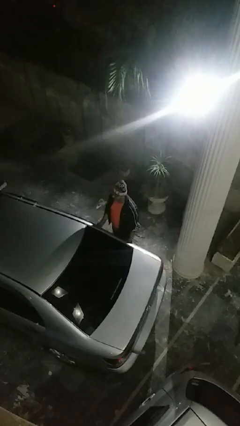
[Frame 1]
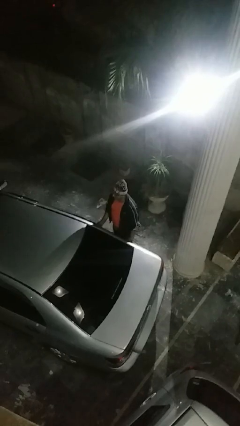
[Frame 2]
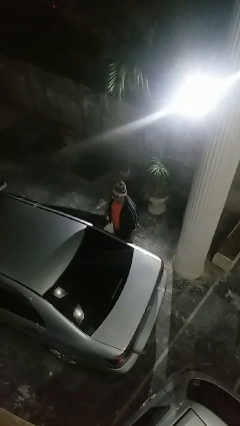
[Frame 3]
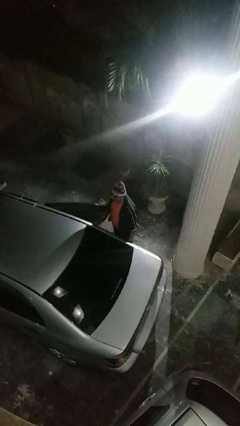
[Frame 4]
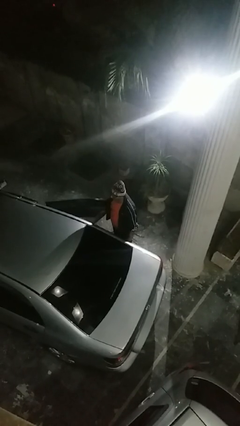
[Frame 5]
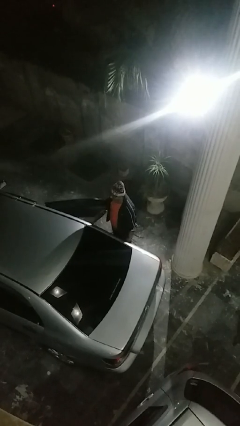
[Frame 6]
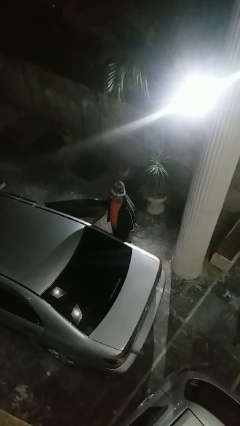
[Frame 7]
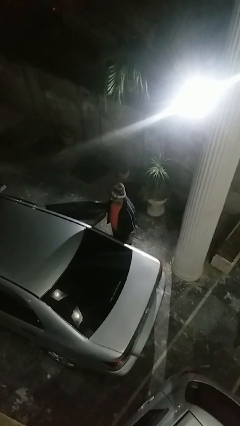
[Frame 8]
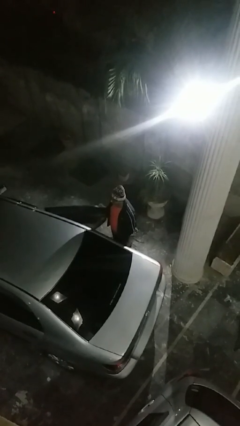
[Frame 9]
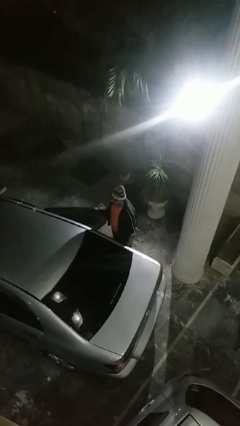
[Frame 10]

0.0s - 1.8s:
person opens car door

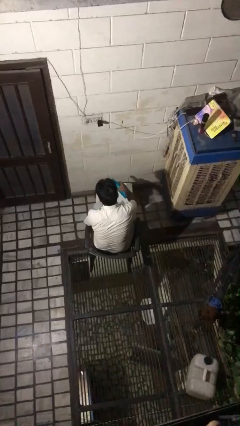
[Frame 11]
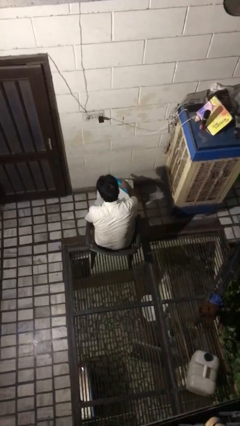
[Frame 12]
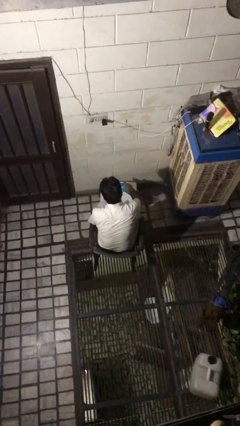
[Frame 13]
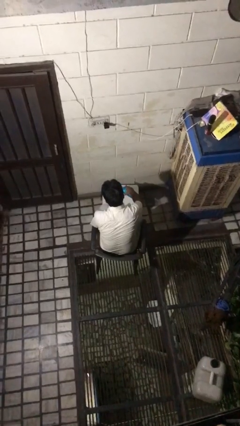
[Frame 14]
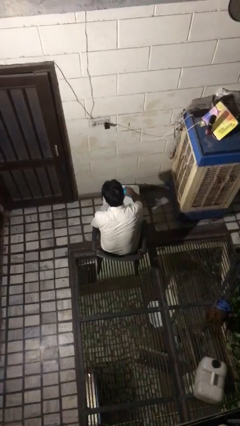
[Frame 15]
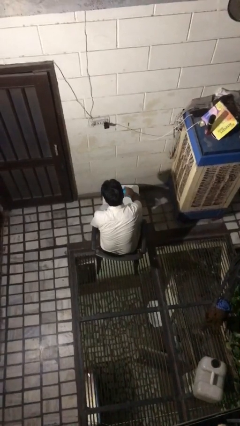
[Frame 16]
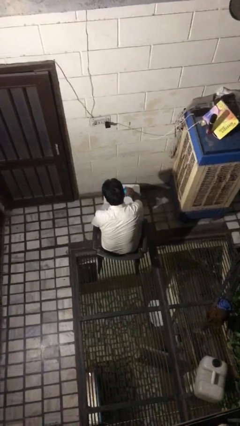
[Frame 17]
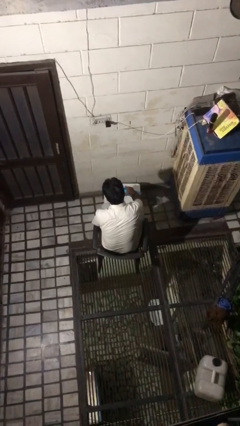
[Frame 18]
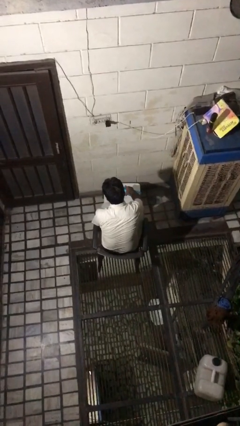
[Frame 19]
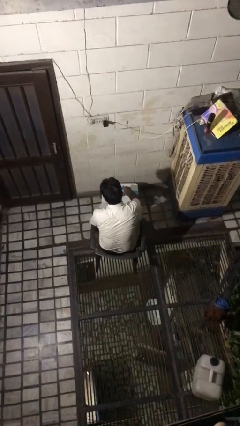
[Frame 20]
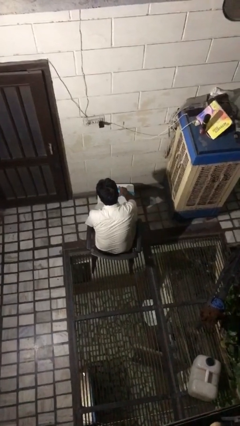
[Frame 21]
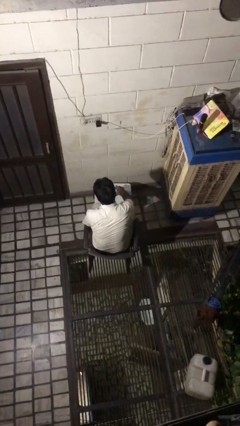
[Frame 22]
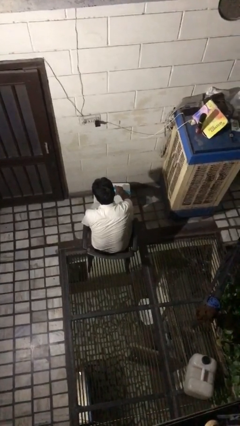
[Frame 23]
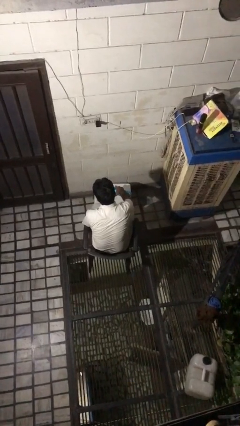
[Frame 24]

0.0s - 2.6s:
person pours liquid into cup

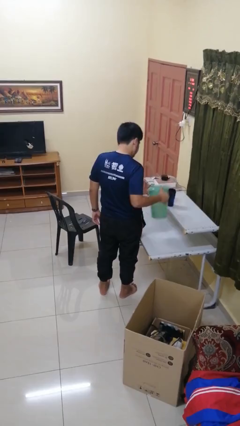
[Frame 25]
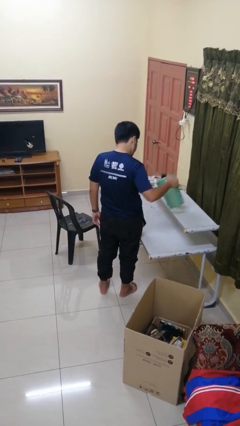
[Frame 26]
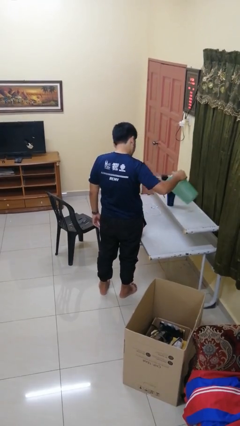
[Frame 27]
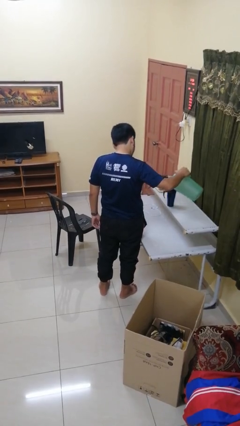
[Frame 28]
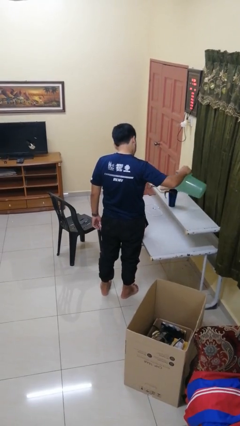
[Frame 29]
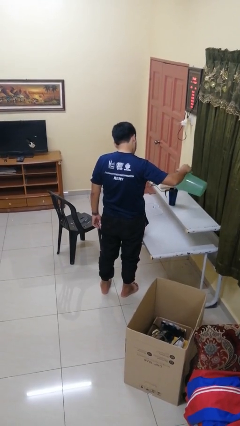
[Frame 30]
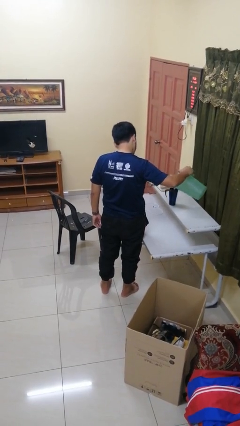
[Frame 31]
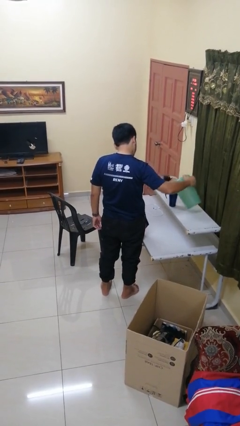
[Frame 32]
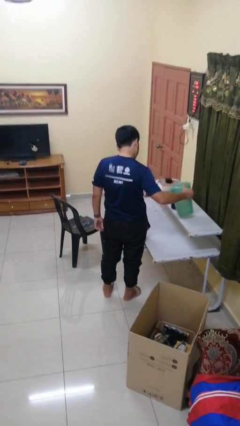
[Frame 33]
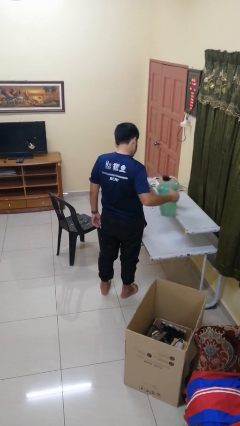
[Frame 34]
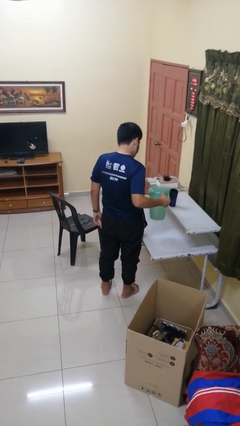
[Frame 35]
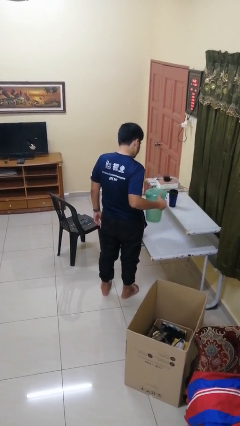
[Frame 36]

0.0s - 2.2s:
person pours coffee into mug

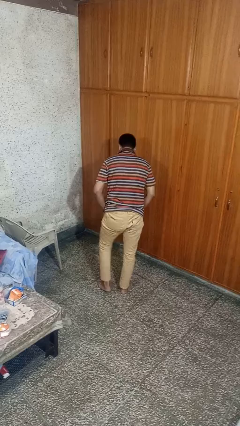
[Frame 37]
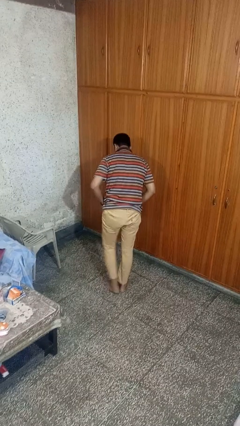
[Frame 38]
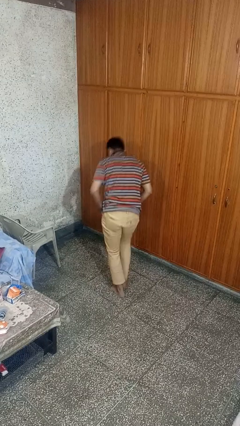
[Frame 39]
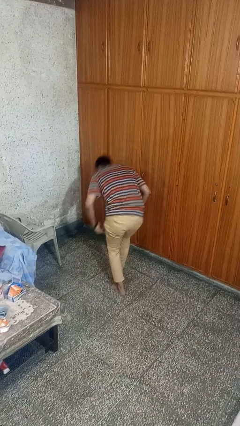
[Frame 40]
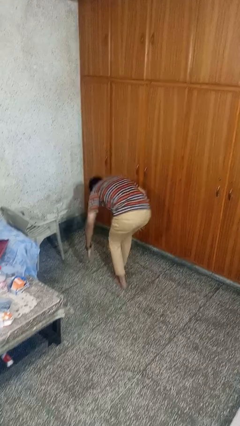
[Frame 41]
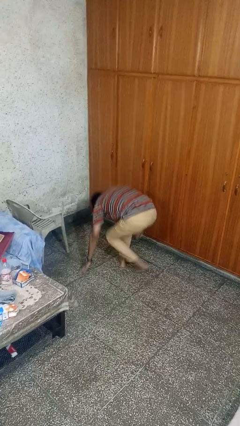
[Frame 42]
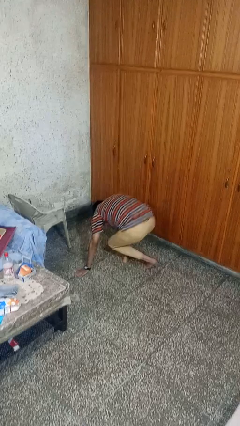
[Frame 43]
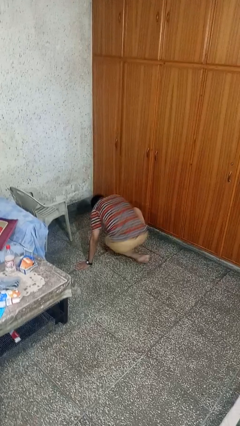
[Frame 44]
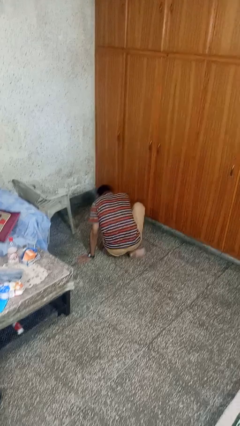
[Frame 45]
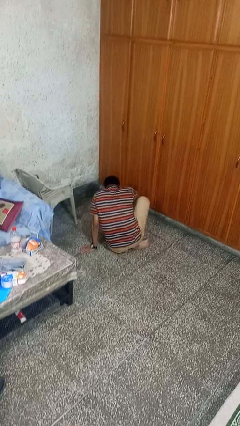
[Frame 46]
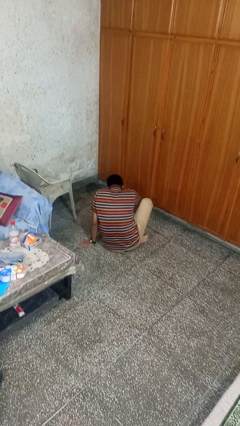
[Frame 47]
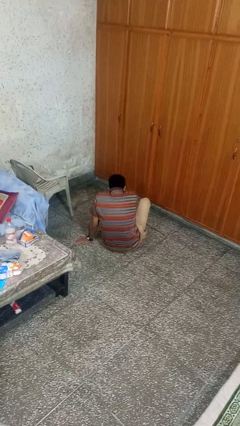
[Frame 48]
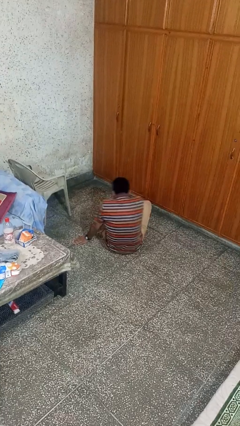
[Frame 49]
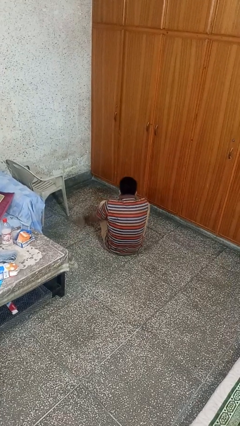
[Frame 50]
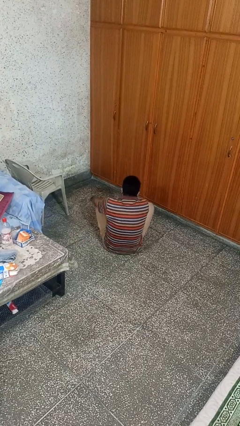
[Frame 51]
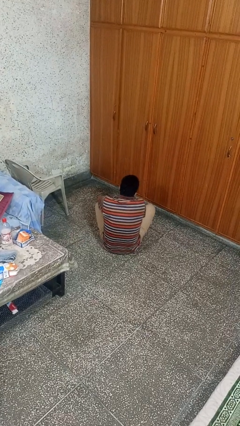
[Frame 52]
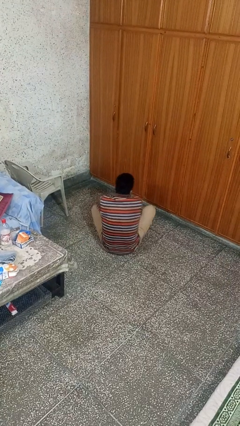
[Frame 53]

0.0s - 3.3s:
person sits crisscross

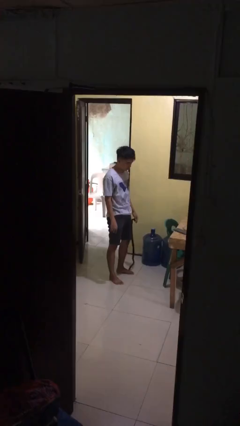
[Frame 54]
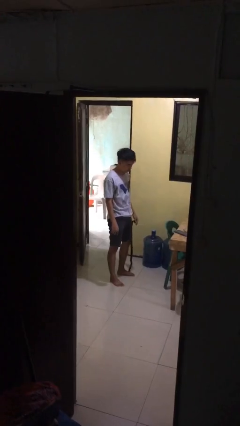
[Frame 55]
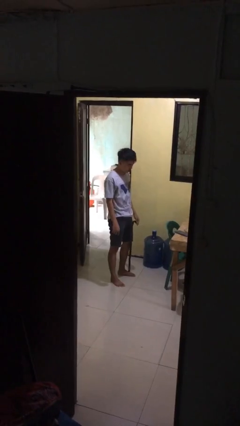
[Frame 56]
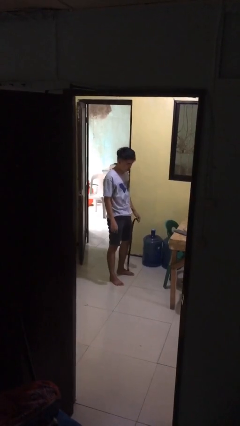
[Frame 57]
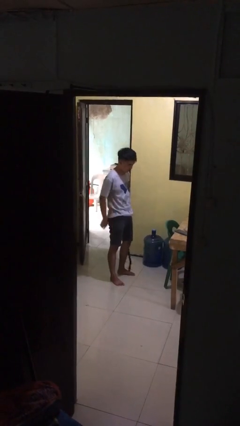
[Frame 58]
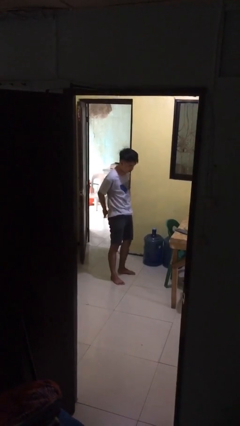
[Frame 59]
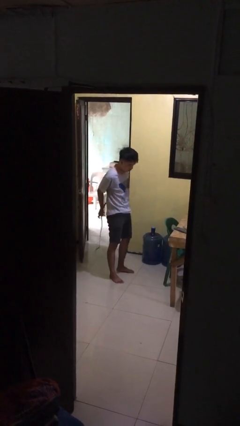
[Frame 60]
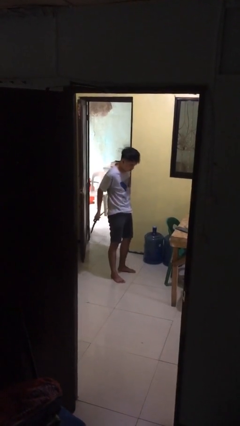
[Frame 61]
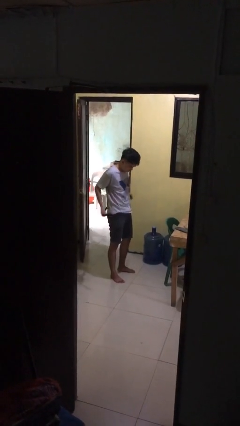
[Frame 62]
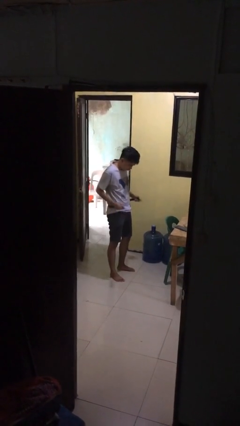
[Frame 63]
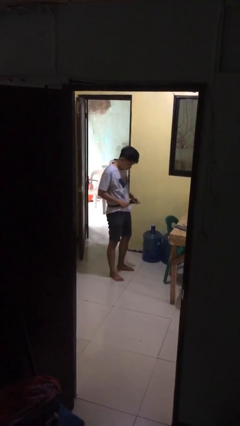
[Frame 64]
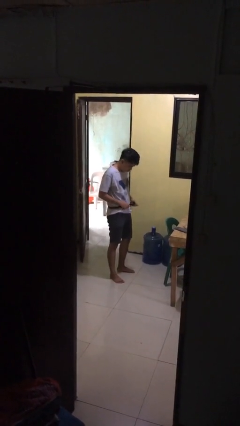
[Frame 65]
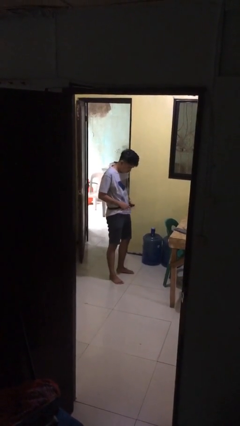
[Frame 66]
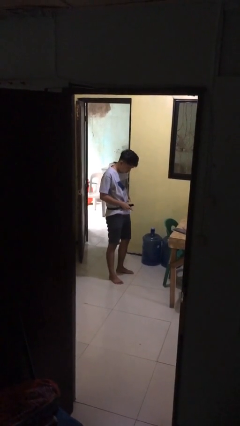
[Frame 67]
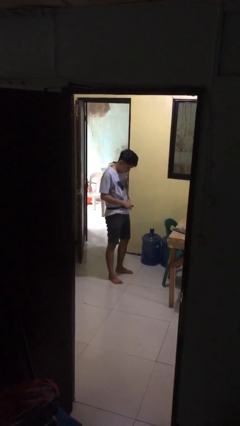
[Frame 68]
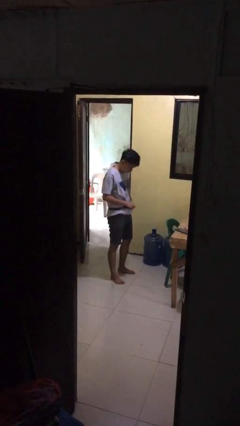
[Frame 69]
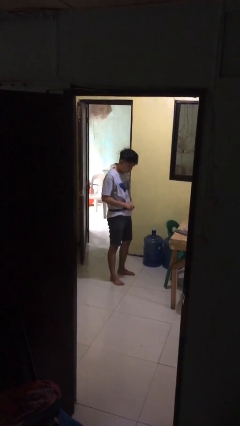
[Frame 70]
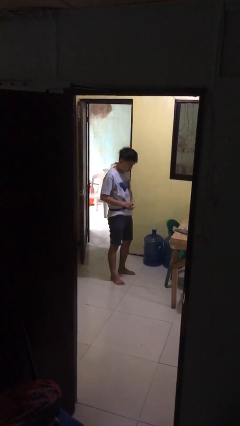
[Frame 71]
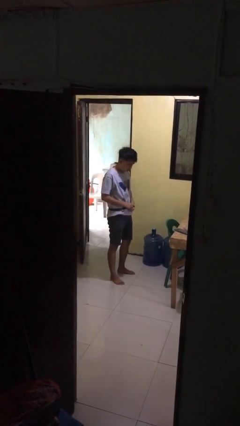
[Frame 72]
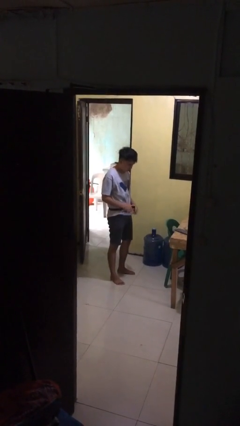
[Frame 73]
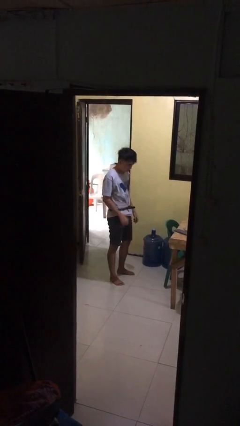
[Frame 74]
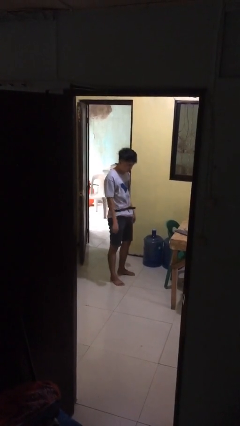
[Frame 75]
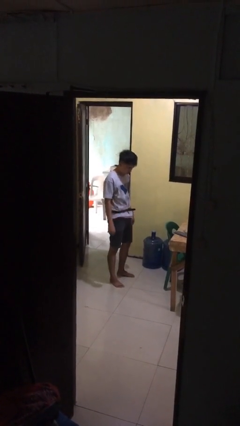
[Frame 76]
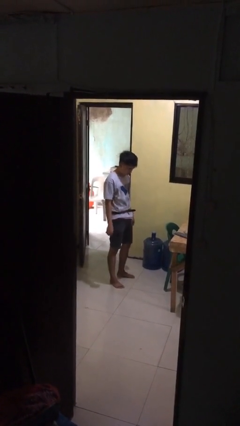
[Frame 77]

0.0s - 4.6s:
person puts on belt

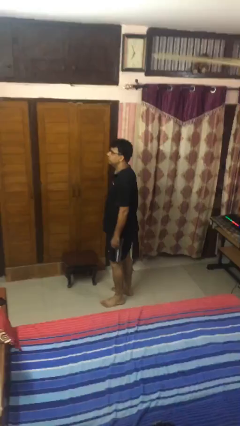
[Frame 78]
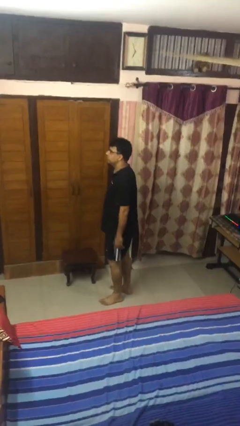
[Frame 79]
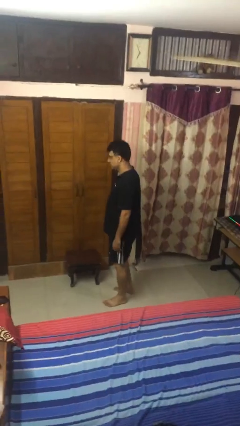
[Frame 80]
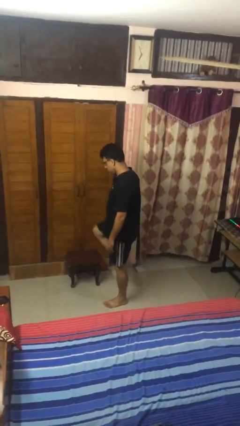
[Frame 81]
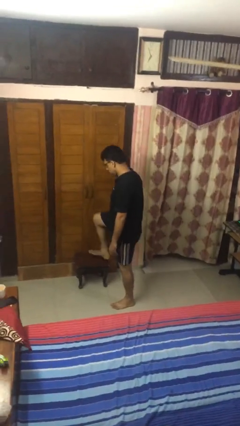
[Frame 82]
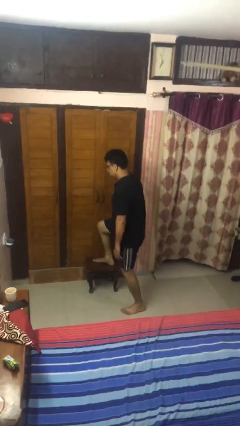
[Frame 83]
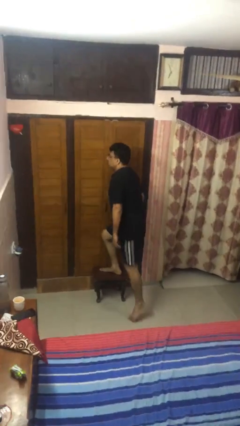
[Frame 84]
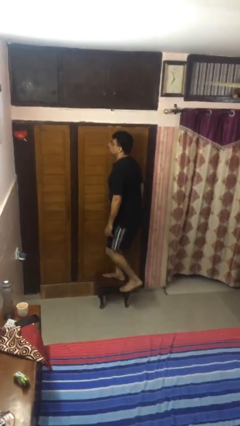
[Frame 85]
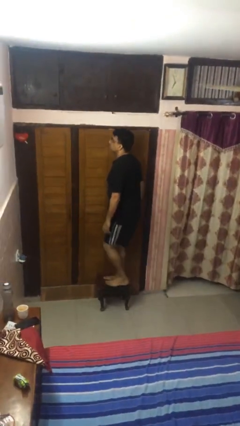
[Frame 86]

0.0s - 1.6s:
person climbs on table

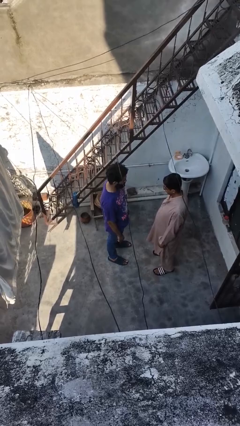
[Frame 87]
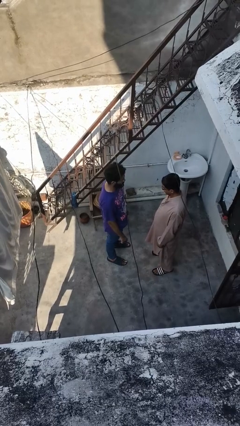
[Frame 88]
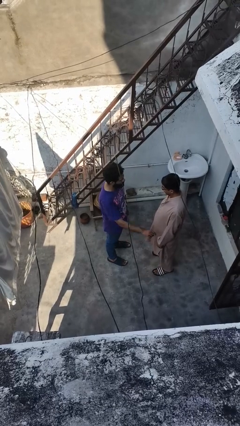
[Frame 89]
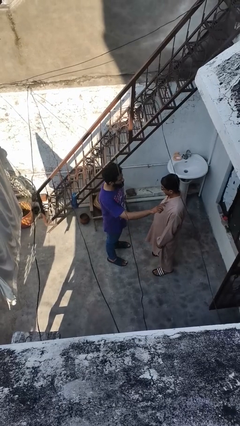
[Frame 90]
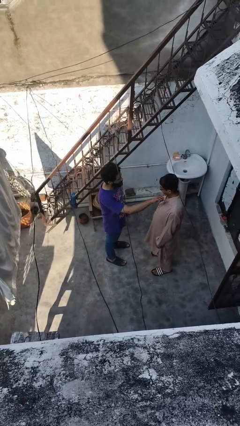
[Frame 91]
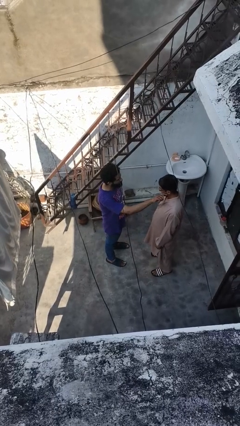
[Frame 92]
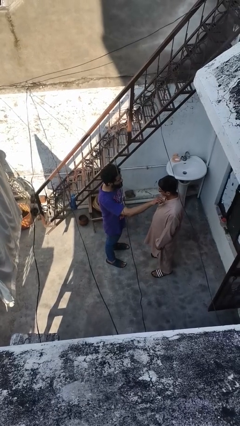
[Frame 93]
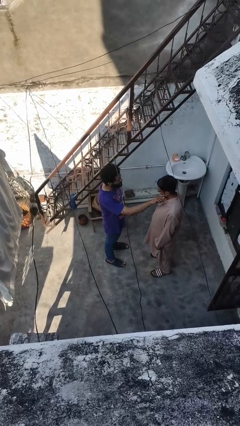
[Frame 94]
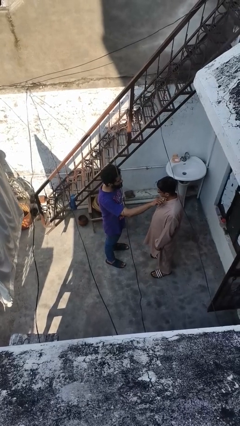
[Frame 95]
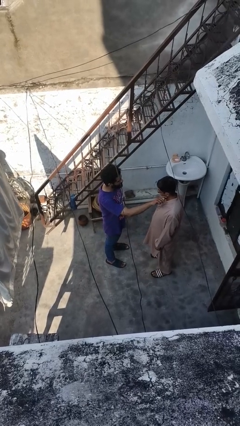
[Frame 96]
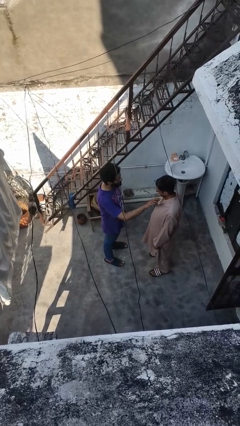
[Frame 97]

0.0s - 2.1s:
person pounds shoulders of person
